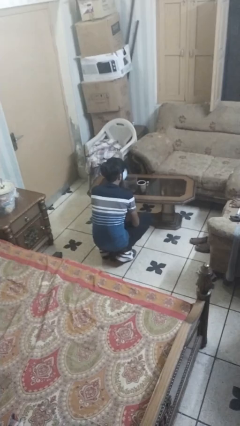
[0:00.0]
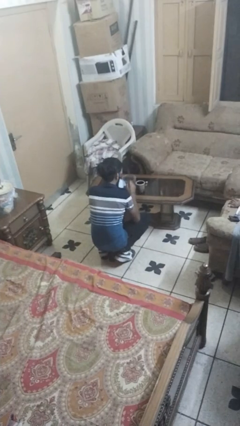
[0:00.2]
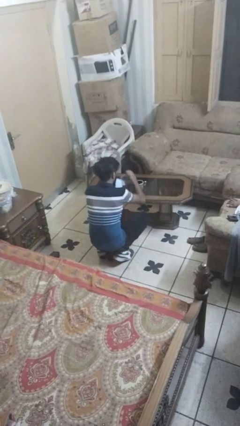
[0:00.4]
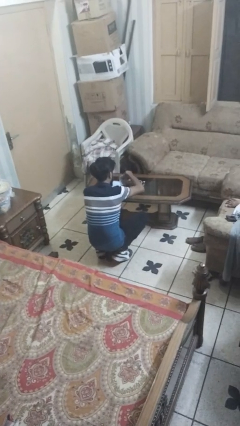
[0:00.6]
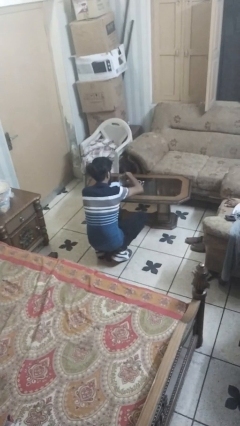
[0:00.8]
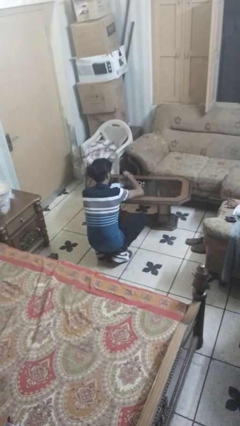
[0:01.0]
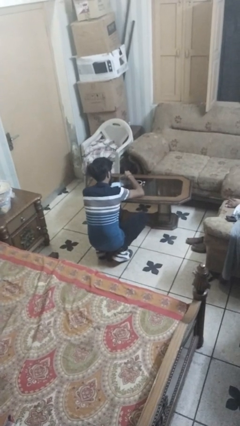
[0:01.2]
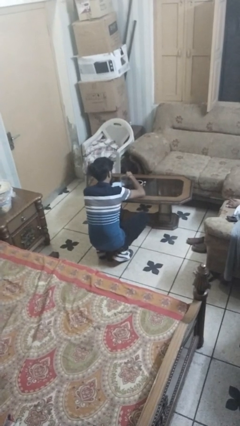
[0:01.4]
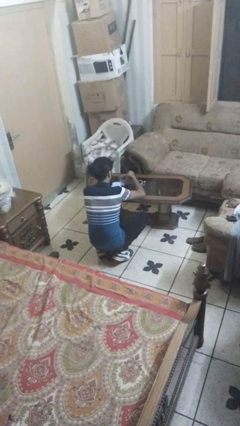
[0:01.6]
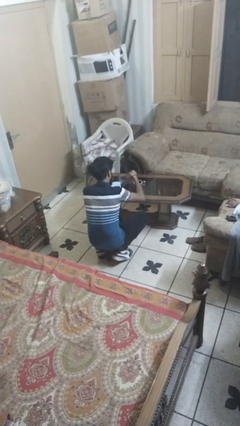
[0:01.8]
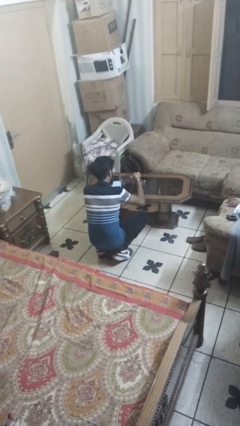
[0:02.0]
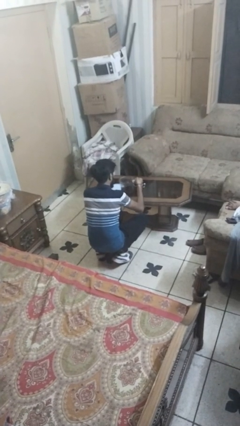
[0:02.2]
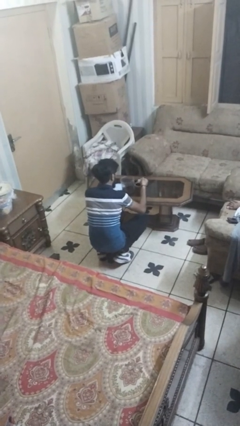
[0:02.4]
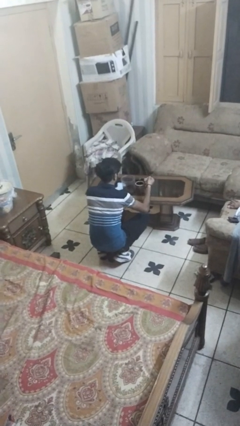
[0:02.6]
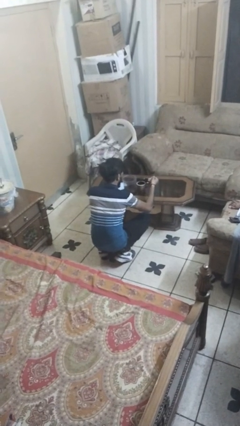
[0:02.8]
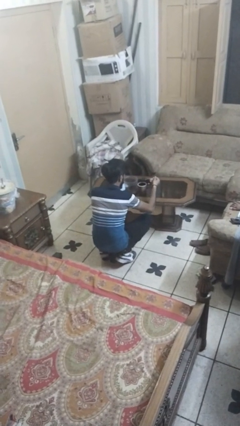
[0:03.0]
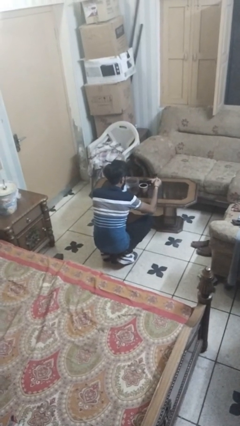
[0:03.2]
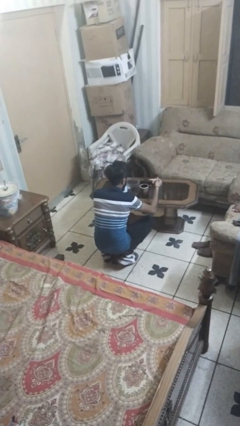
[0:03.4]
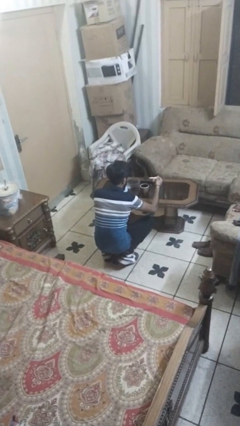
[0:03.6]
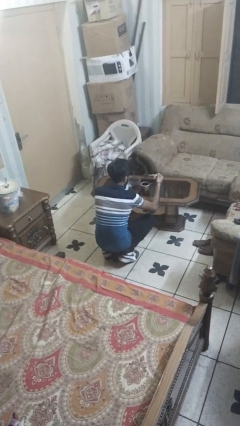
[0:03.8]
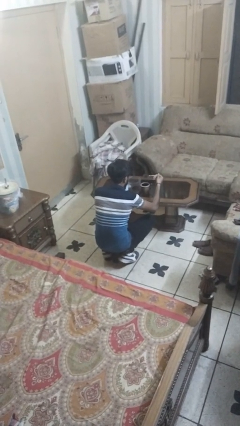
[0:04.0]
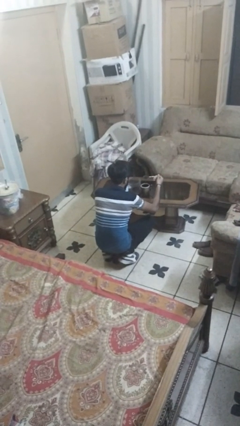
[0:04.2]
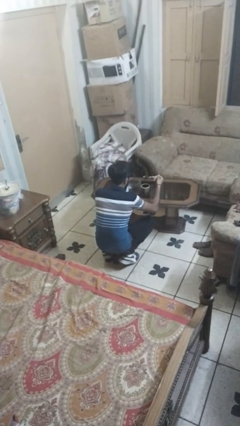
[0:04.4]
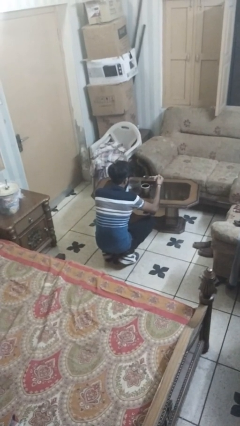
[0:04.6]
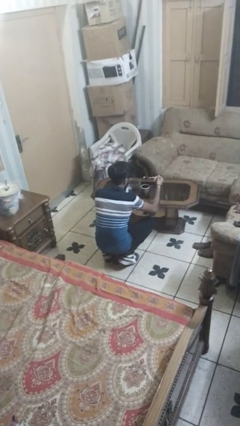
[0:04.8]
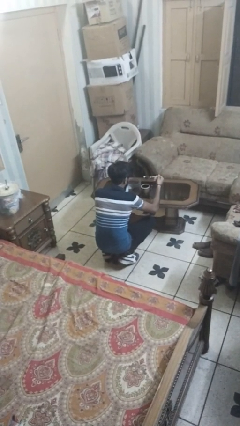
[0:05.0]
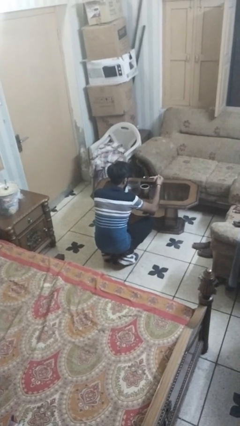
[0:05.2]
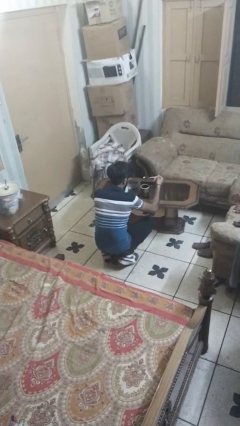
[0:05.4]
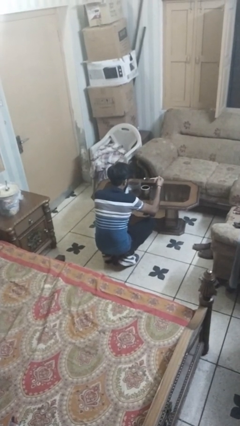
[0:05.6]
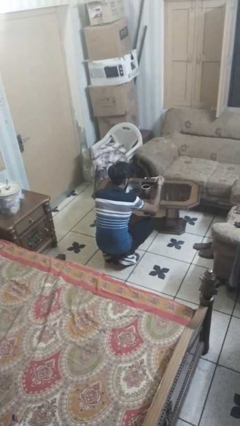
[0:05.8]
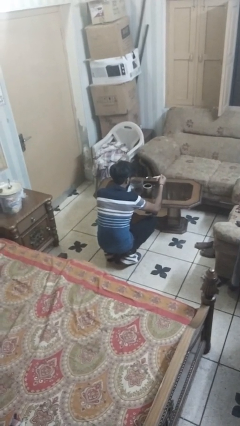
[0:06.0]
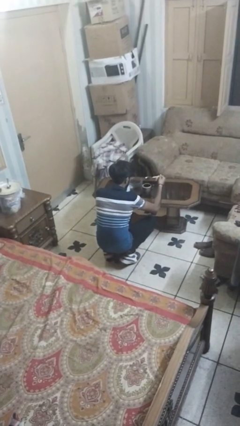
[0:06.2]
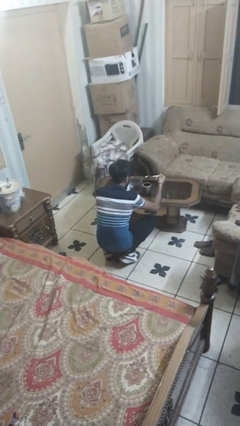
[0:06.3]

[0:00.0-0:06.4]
person pours coffee into mug

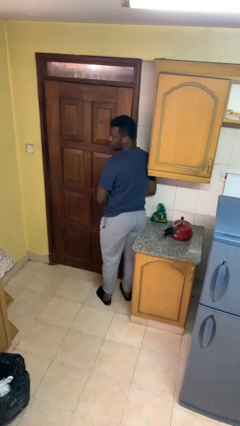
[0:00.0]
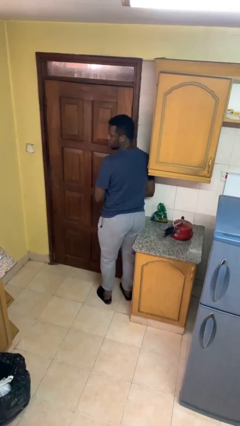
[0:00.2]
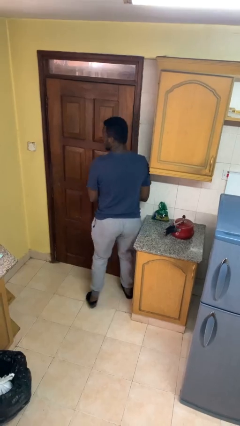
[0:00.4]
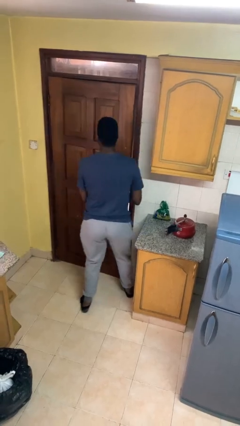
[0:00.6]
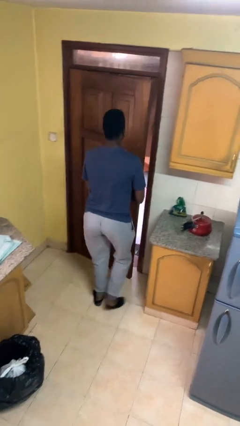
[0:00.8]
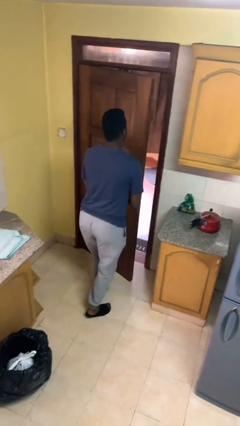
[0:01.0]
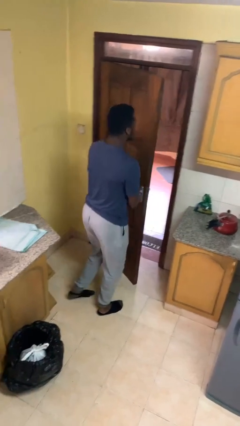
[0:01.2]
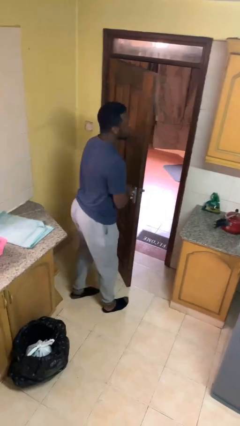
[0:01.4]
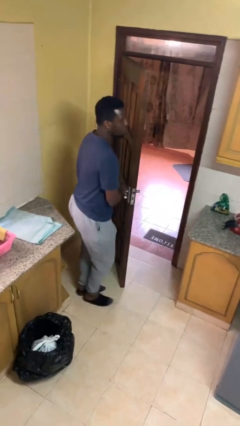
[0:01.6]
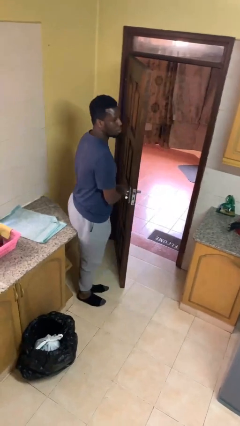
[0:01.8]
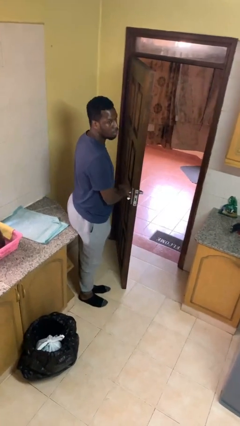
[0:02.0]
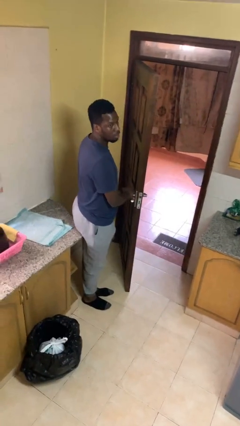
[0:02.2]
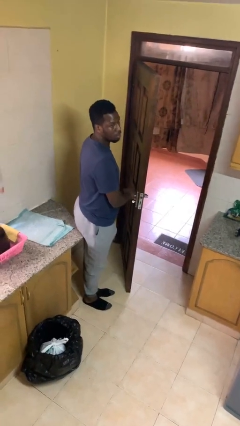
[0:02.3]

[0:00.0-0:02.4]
person opens facility door

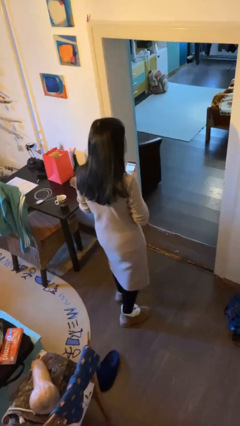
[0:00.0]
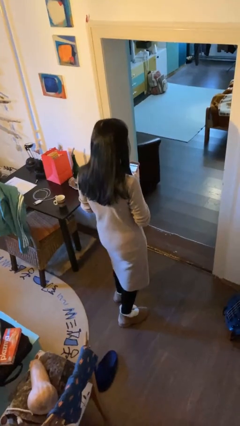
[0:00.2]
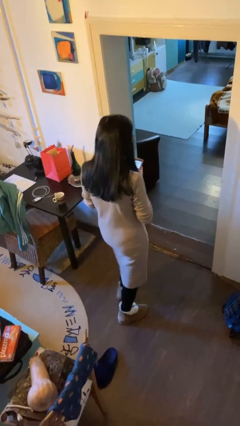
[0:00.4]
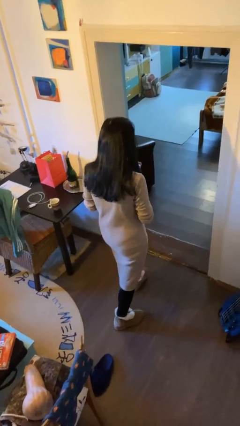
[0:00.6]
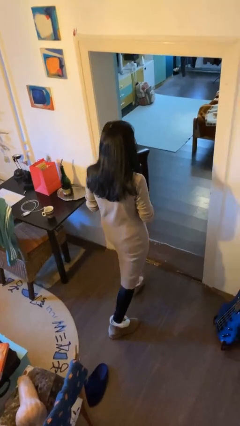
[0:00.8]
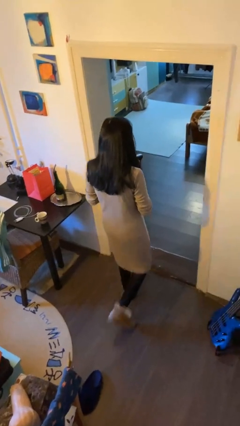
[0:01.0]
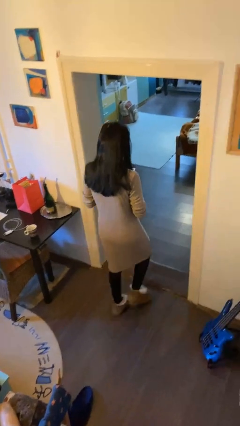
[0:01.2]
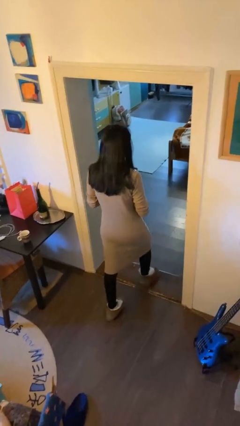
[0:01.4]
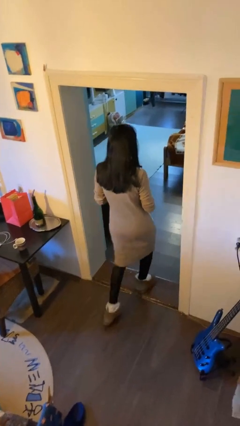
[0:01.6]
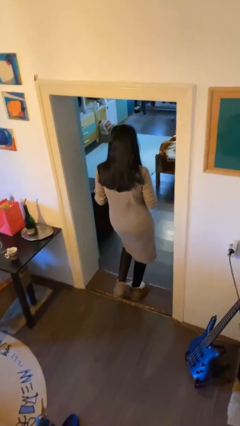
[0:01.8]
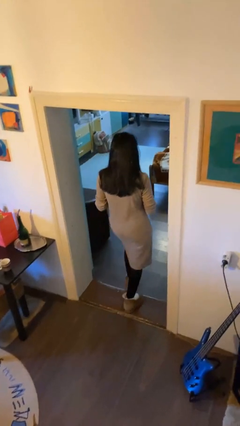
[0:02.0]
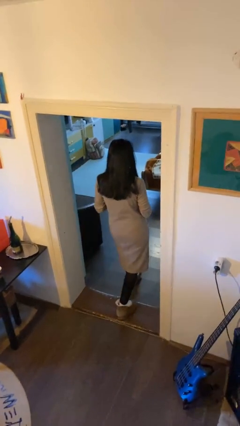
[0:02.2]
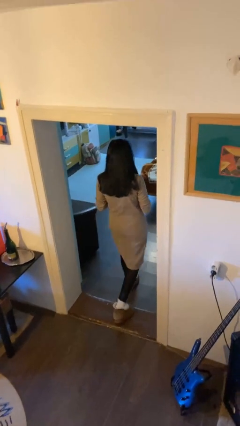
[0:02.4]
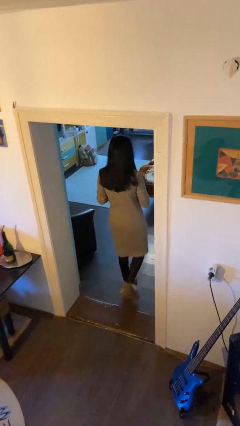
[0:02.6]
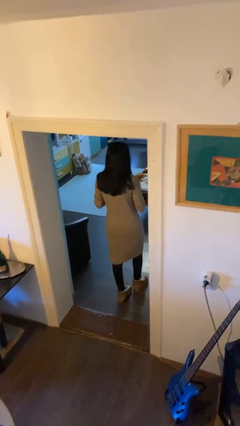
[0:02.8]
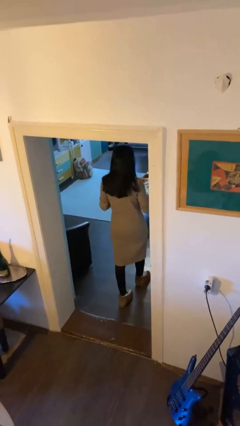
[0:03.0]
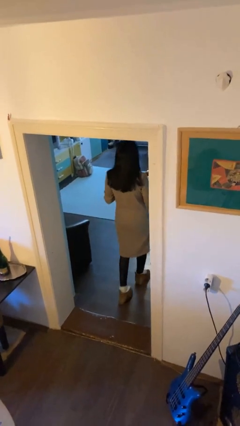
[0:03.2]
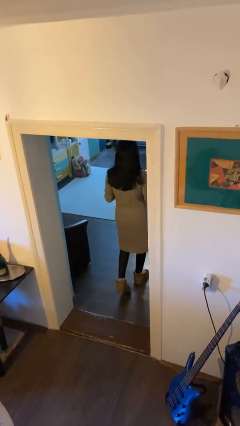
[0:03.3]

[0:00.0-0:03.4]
person exits scene through structure

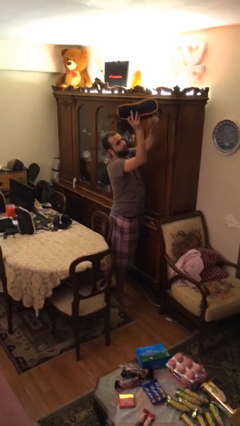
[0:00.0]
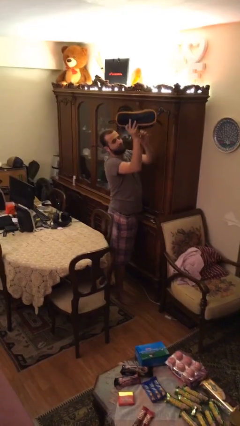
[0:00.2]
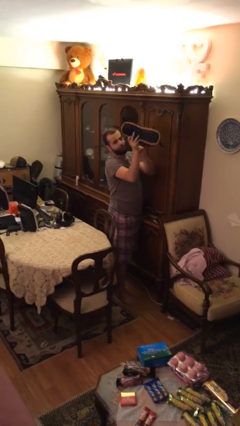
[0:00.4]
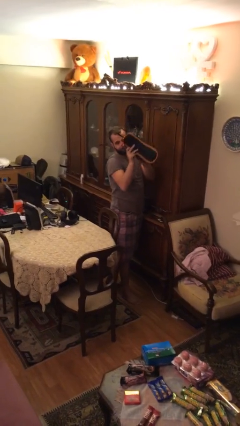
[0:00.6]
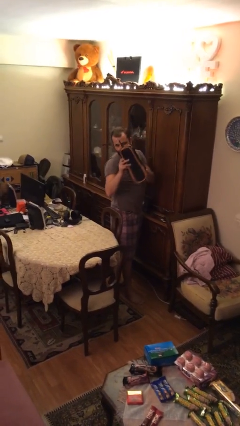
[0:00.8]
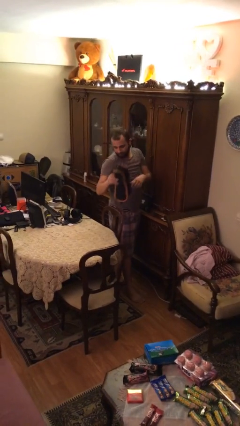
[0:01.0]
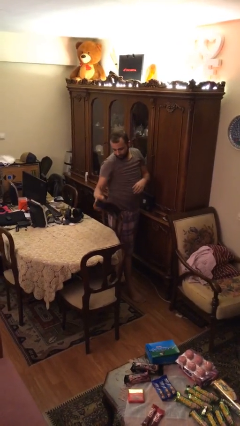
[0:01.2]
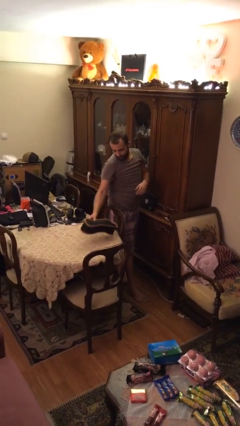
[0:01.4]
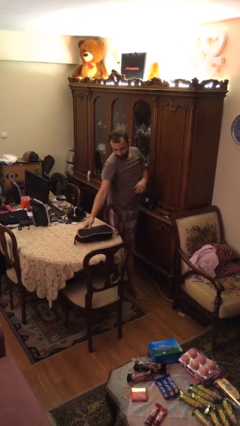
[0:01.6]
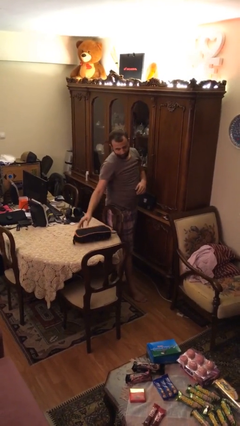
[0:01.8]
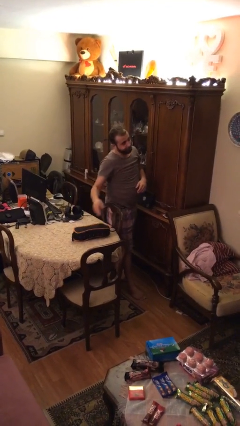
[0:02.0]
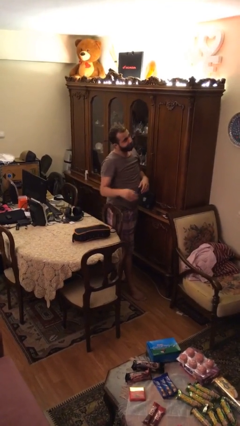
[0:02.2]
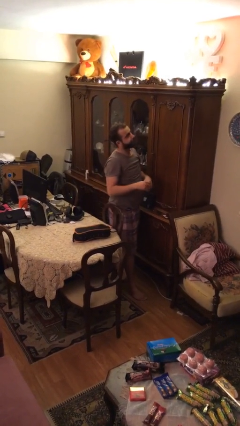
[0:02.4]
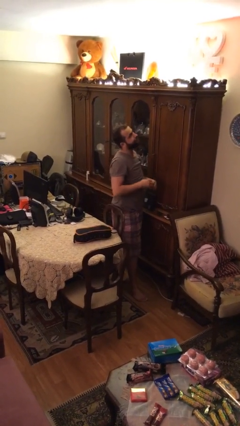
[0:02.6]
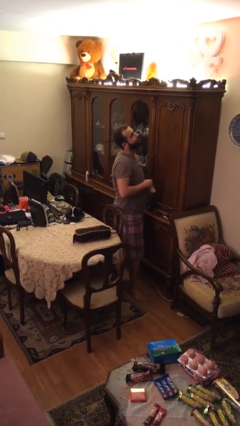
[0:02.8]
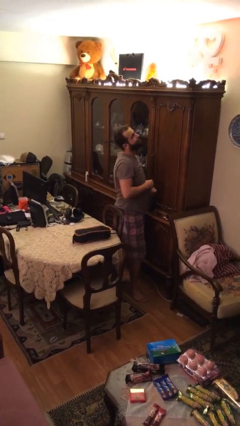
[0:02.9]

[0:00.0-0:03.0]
person puts down object on table

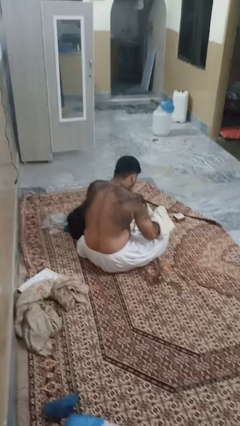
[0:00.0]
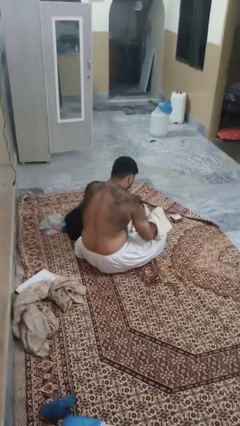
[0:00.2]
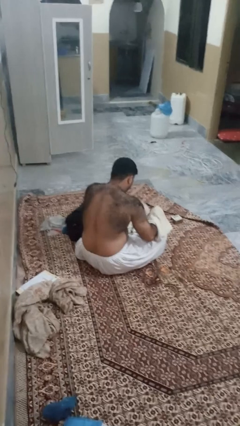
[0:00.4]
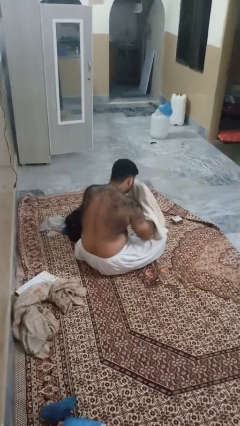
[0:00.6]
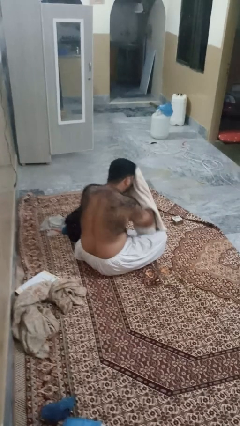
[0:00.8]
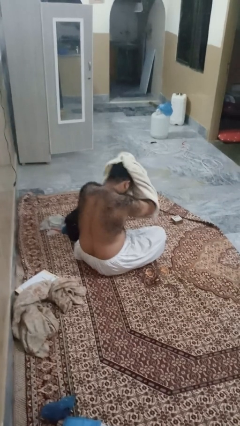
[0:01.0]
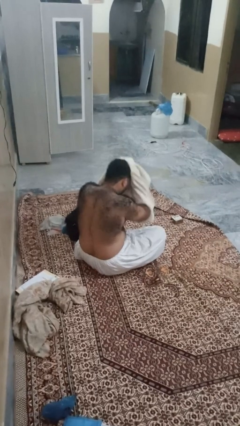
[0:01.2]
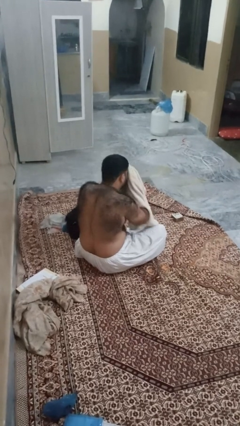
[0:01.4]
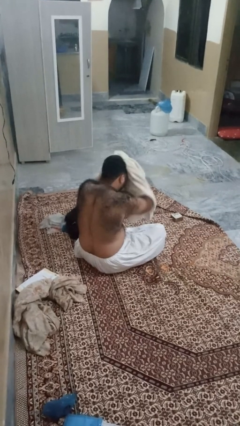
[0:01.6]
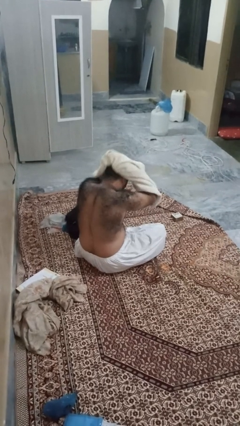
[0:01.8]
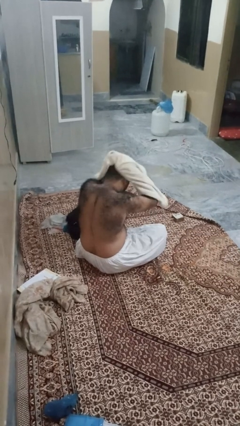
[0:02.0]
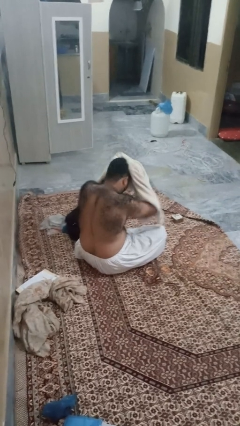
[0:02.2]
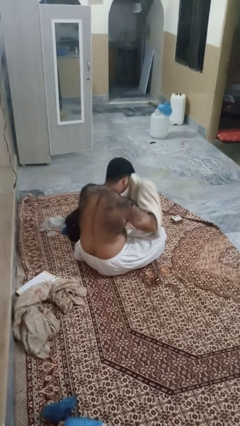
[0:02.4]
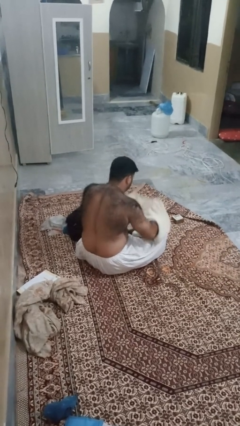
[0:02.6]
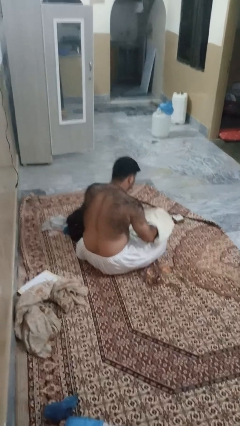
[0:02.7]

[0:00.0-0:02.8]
person dries hair with towel
